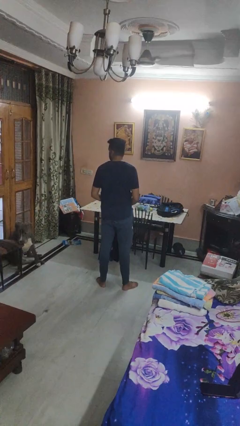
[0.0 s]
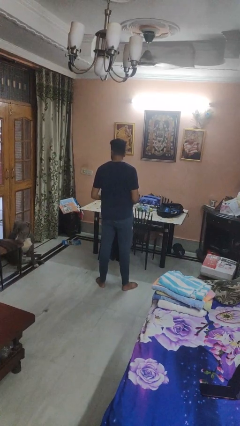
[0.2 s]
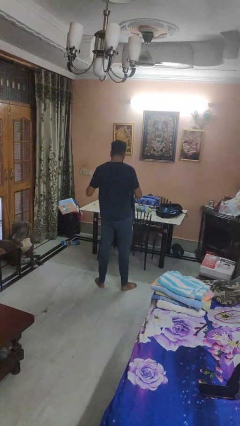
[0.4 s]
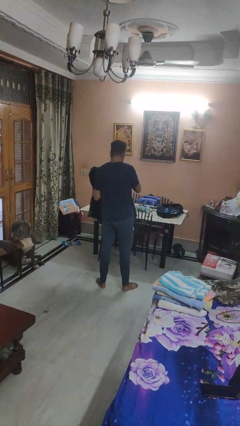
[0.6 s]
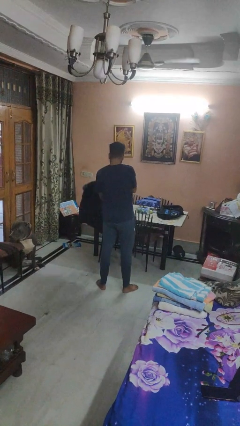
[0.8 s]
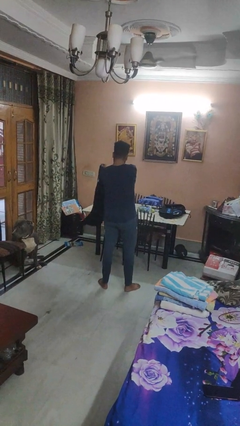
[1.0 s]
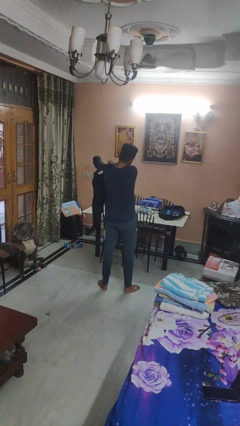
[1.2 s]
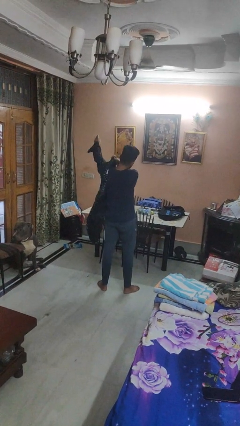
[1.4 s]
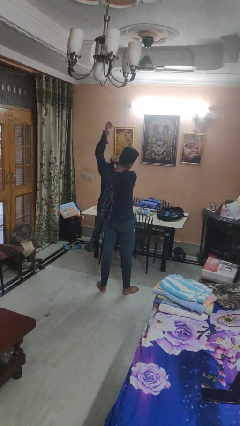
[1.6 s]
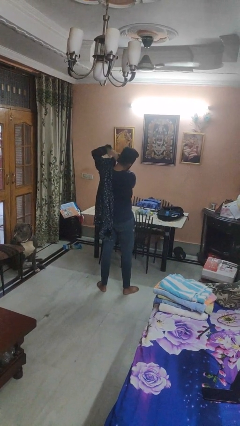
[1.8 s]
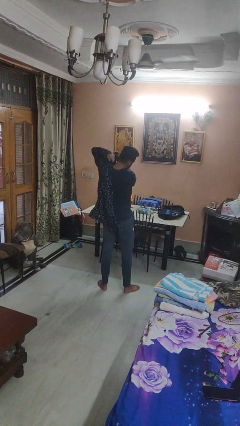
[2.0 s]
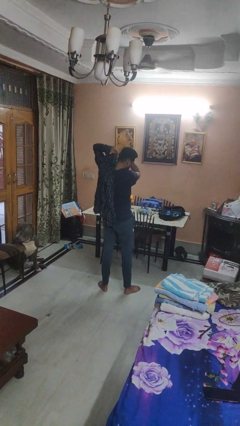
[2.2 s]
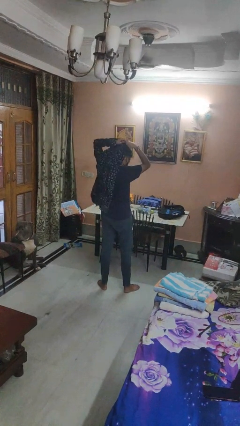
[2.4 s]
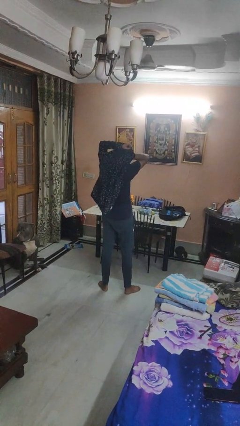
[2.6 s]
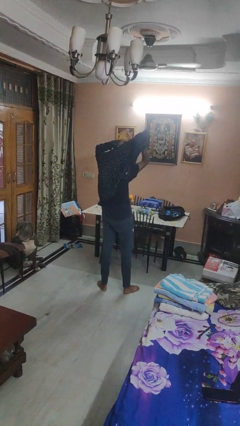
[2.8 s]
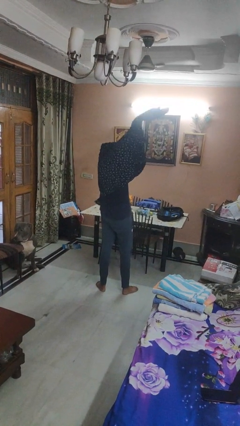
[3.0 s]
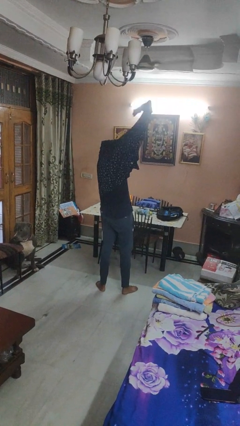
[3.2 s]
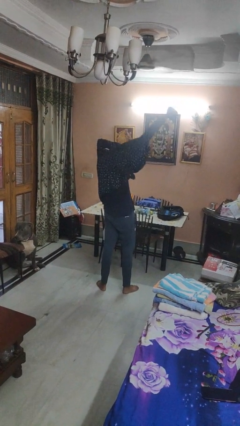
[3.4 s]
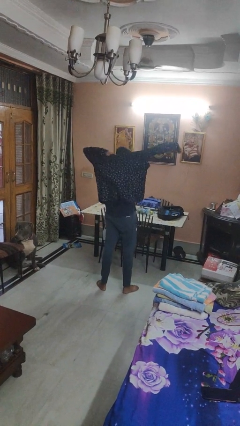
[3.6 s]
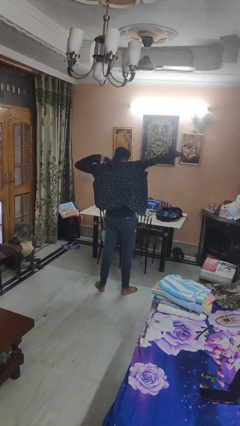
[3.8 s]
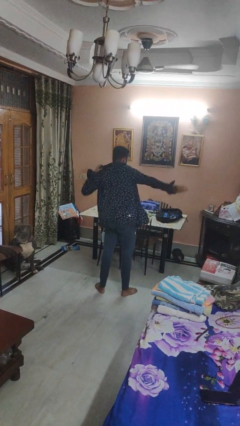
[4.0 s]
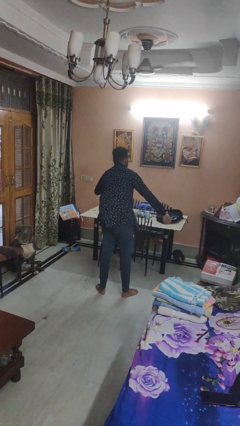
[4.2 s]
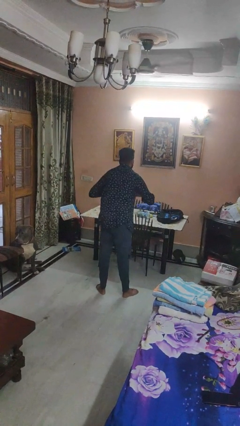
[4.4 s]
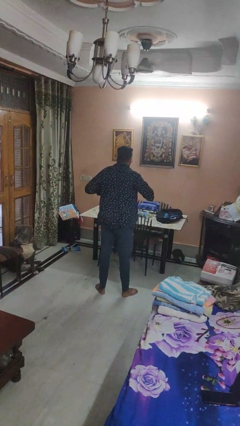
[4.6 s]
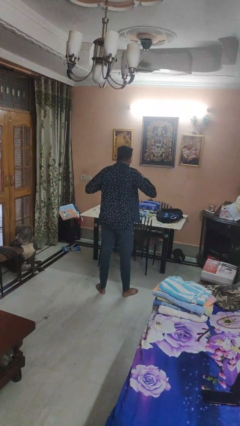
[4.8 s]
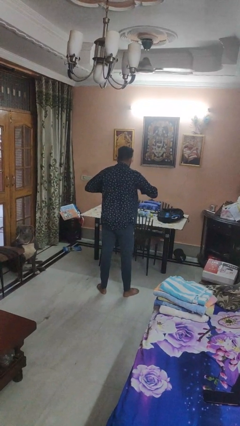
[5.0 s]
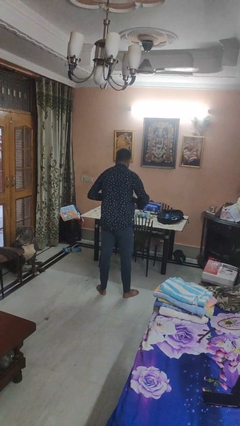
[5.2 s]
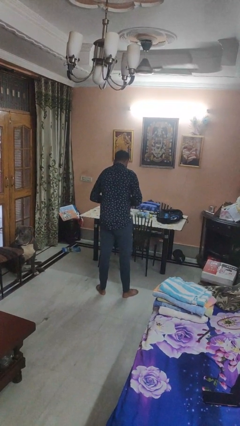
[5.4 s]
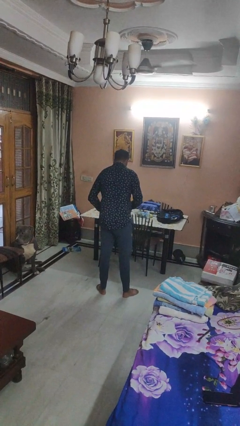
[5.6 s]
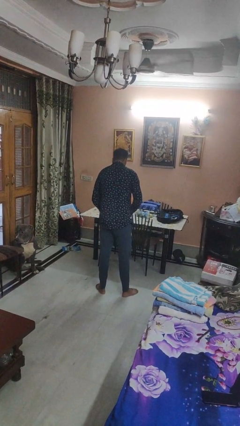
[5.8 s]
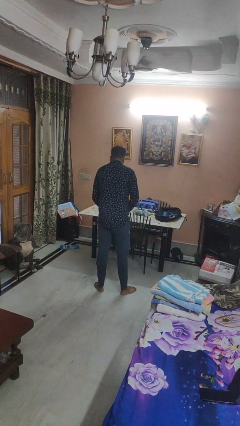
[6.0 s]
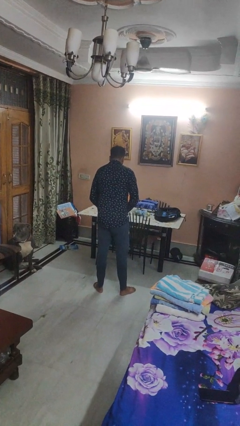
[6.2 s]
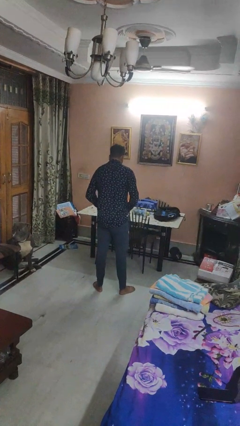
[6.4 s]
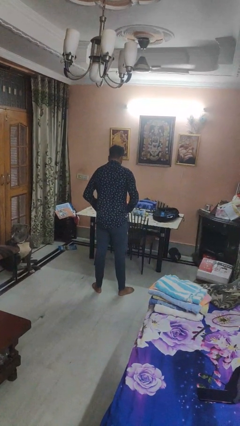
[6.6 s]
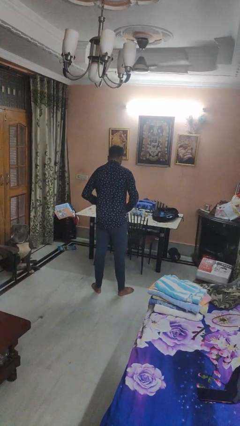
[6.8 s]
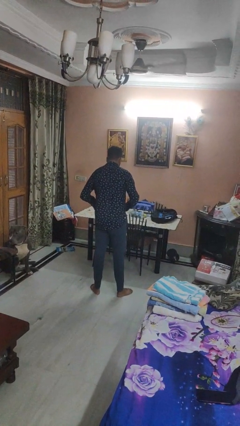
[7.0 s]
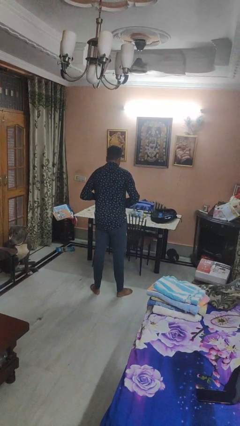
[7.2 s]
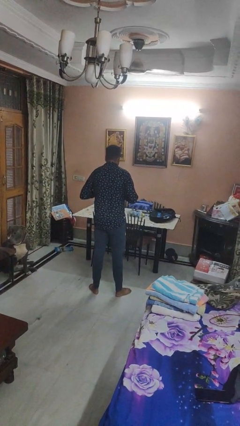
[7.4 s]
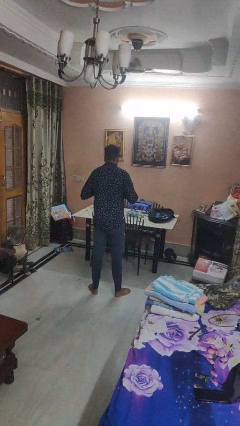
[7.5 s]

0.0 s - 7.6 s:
person puts on shirt

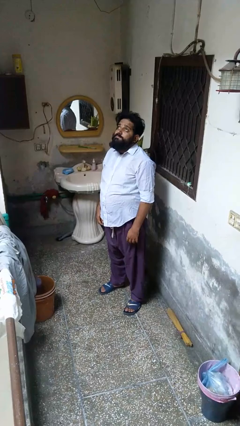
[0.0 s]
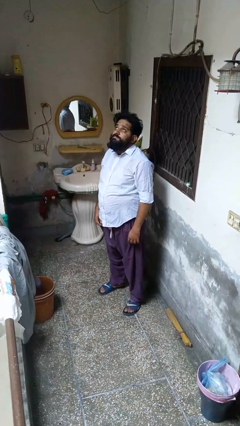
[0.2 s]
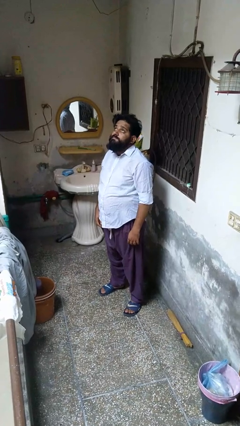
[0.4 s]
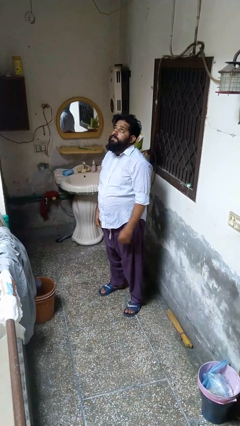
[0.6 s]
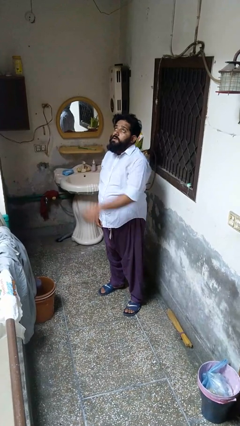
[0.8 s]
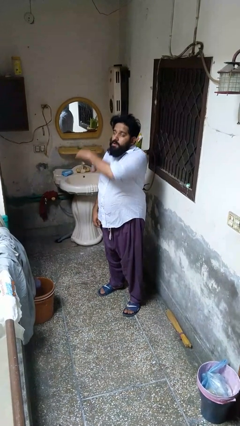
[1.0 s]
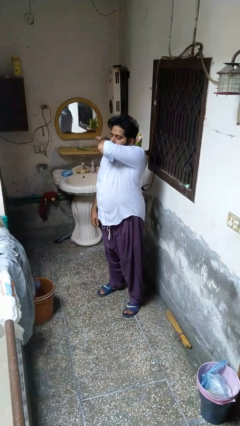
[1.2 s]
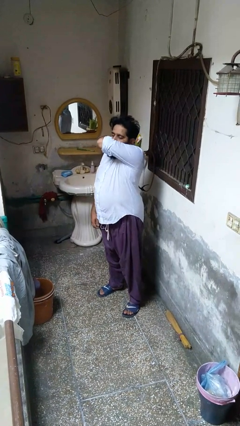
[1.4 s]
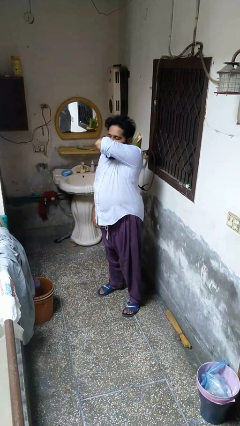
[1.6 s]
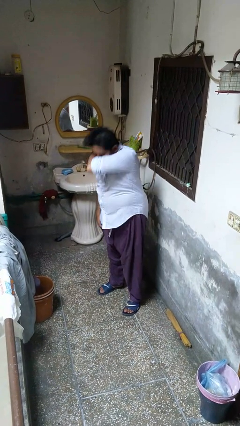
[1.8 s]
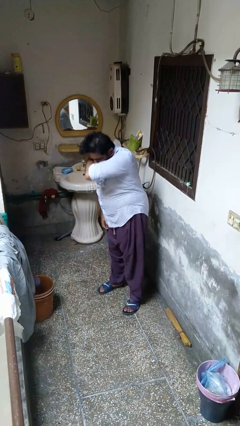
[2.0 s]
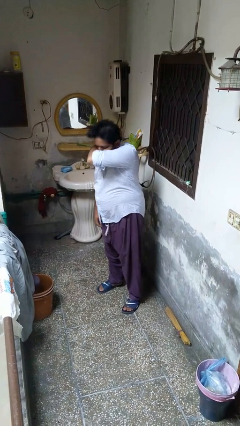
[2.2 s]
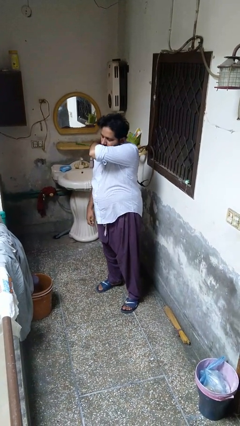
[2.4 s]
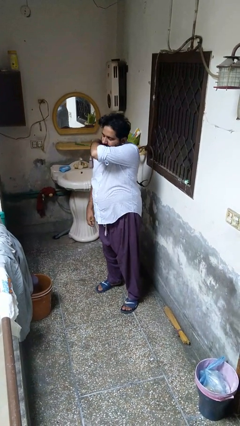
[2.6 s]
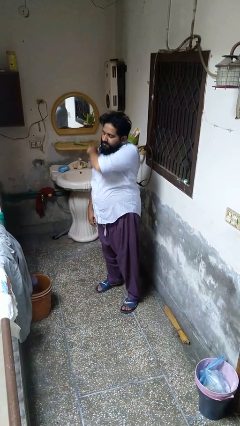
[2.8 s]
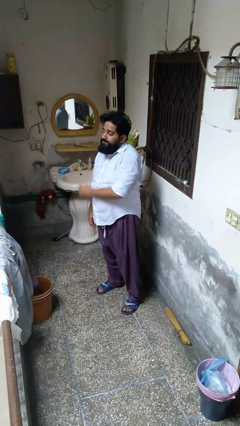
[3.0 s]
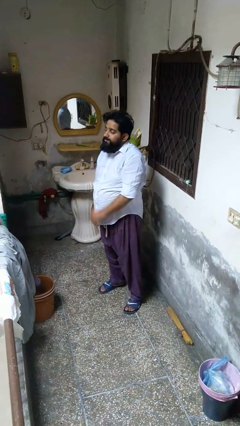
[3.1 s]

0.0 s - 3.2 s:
person sneezes into arm

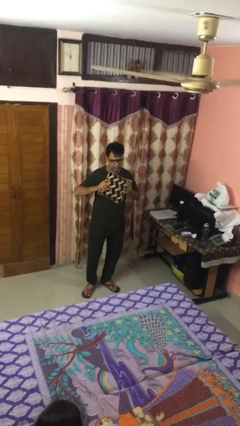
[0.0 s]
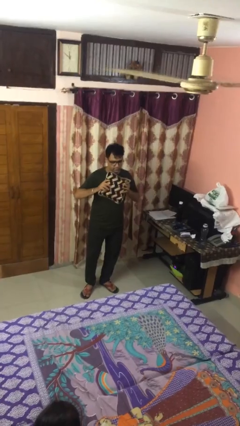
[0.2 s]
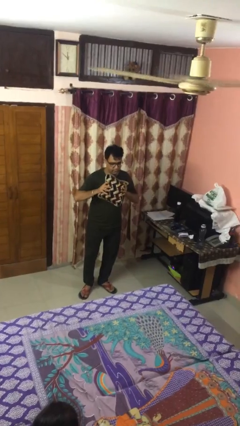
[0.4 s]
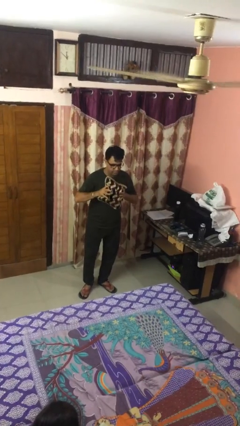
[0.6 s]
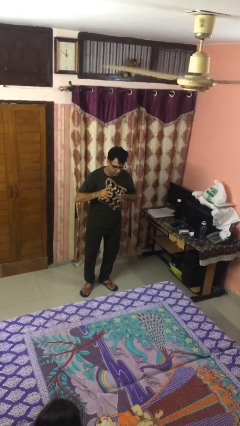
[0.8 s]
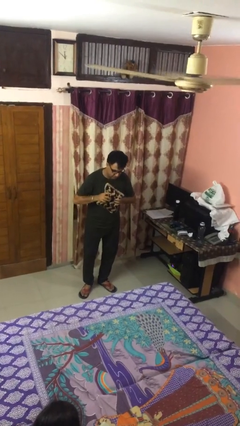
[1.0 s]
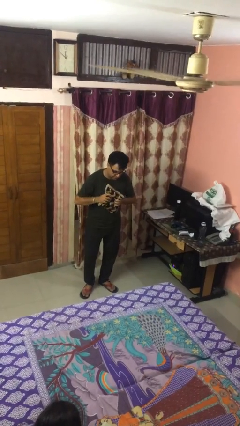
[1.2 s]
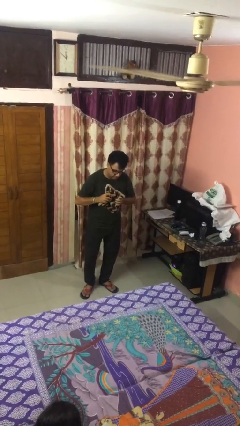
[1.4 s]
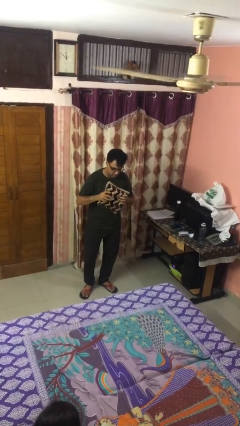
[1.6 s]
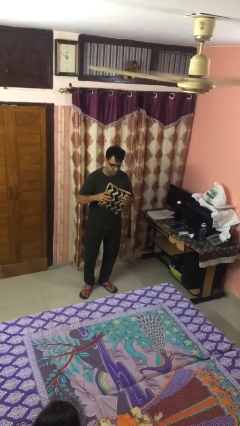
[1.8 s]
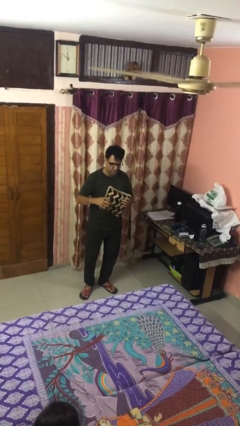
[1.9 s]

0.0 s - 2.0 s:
person squeezes object

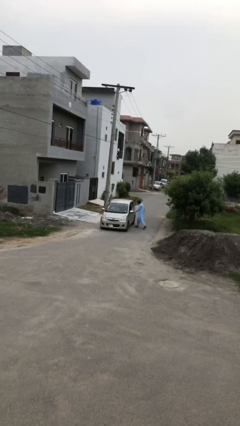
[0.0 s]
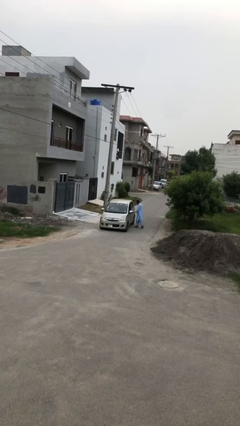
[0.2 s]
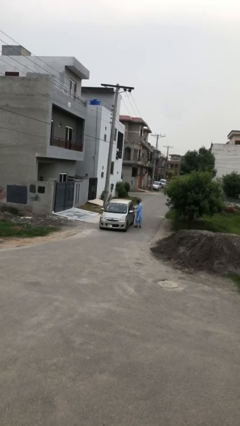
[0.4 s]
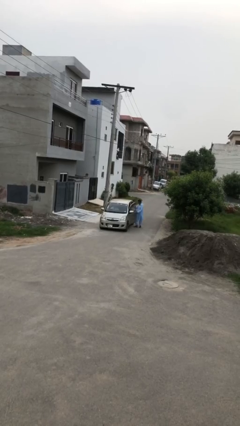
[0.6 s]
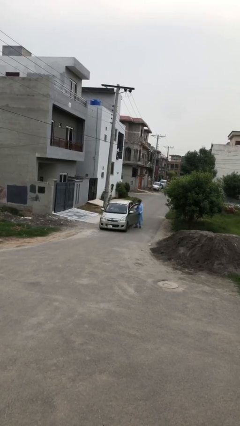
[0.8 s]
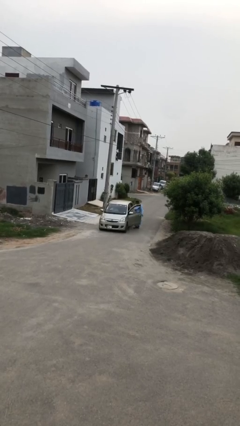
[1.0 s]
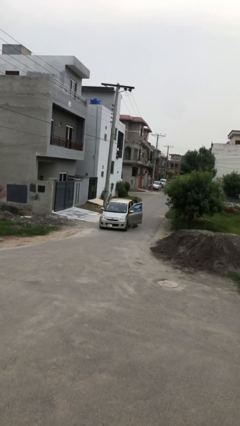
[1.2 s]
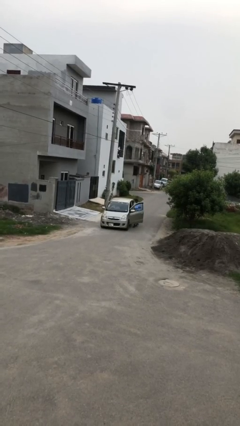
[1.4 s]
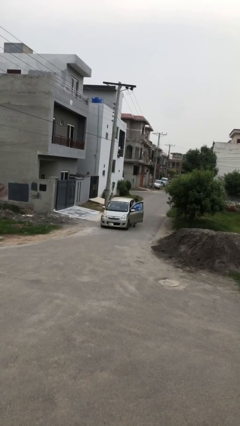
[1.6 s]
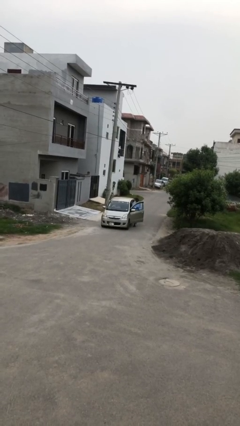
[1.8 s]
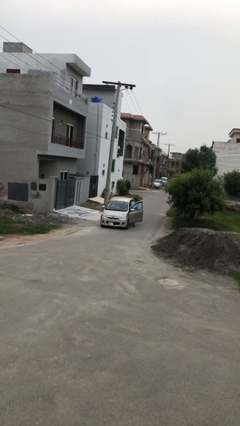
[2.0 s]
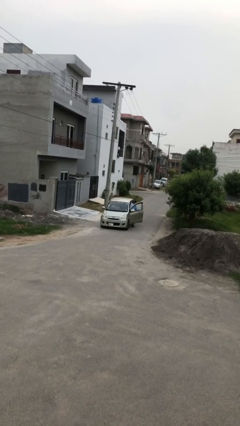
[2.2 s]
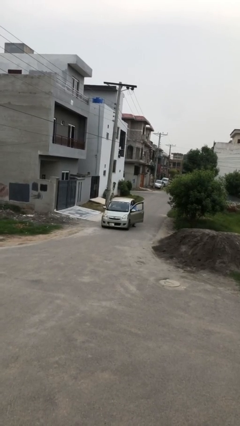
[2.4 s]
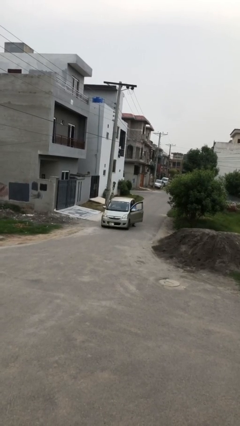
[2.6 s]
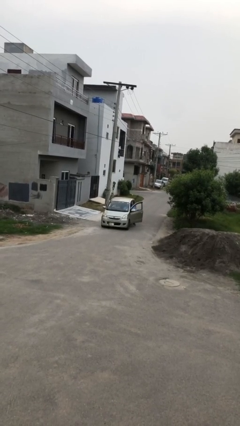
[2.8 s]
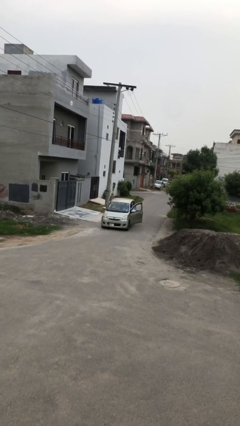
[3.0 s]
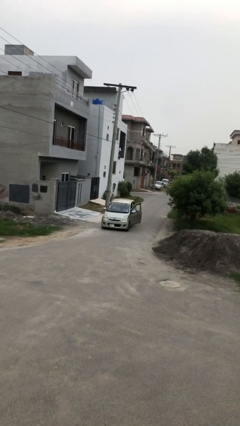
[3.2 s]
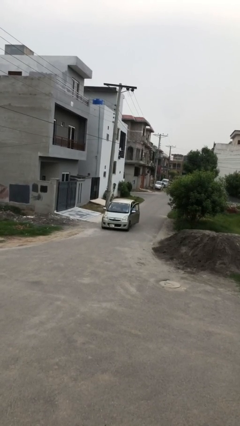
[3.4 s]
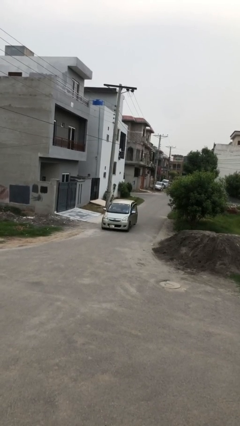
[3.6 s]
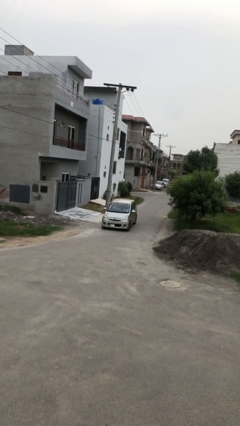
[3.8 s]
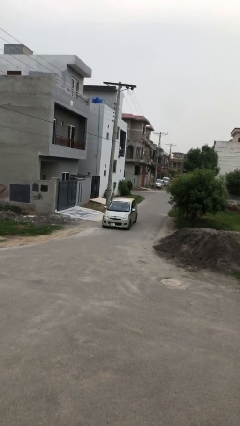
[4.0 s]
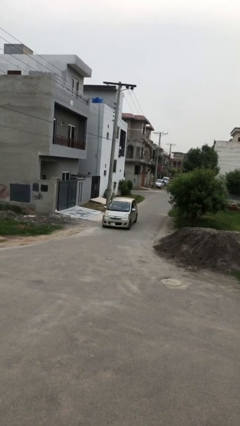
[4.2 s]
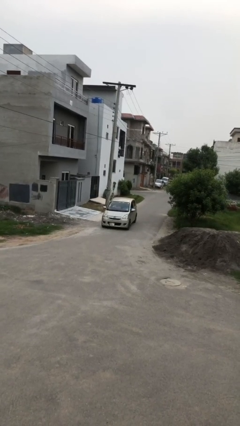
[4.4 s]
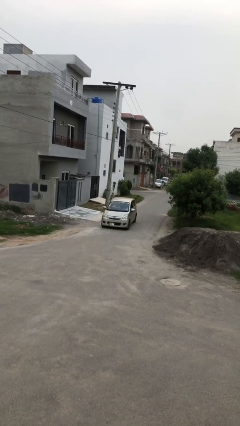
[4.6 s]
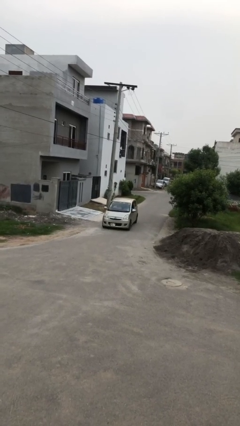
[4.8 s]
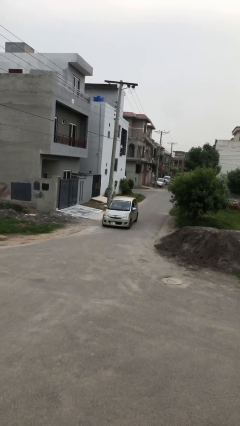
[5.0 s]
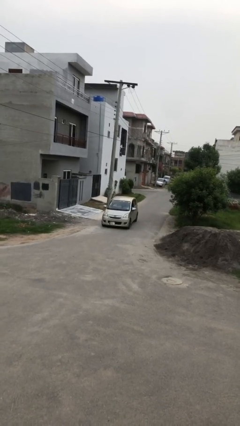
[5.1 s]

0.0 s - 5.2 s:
car picks up person
